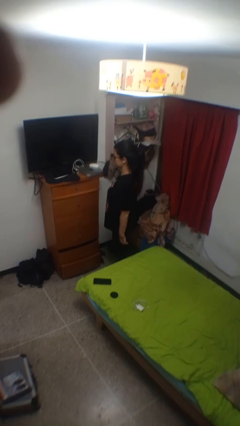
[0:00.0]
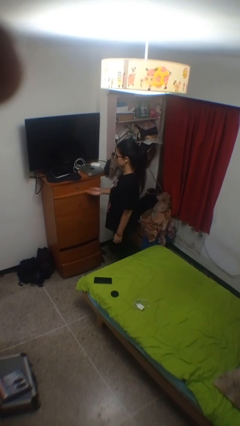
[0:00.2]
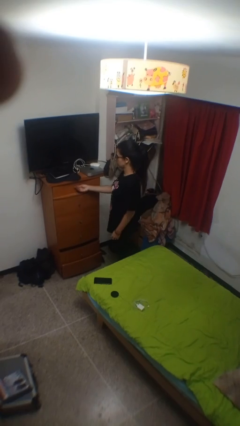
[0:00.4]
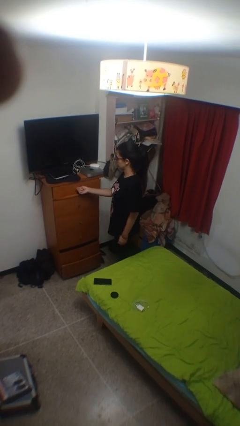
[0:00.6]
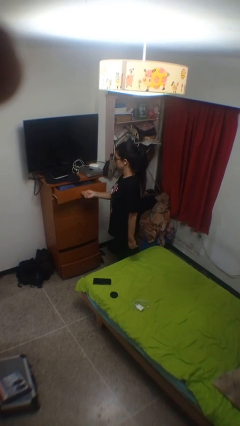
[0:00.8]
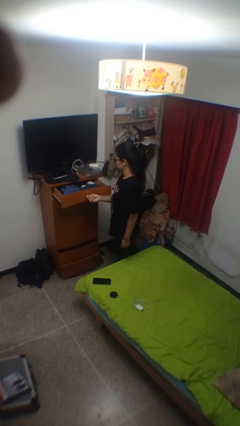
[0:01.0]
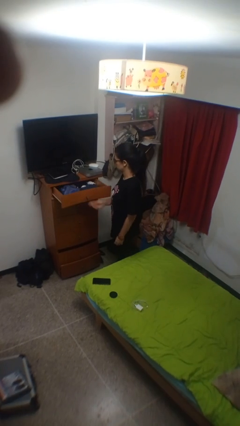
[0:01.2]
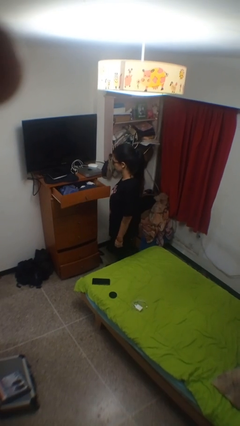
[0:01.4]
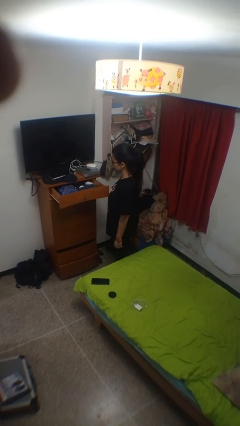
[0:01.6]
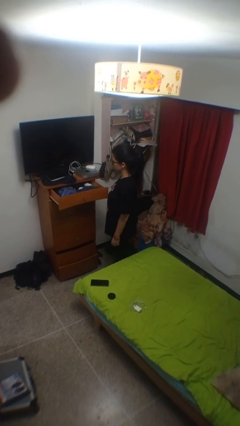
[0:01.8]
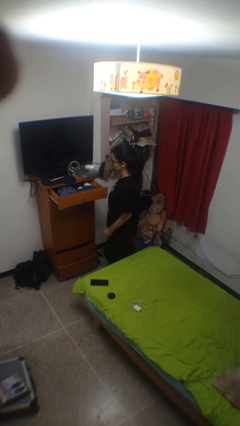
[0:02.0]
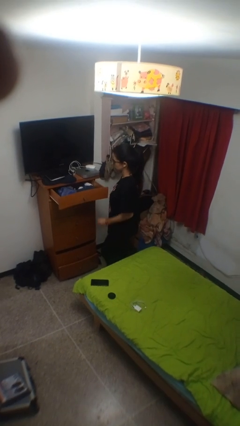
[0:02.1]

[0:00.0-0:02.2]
person opens dresser drawer

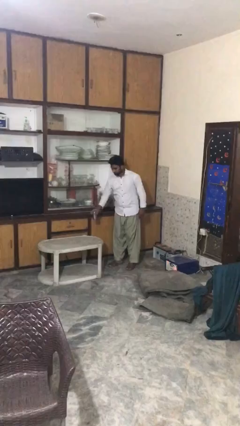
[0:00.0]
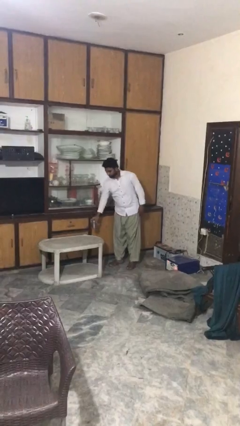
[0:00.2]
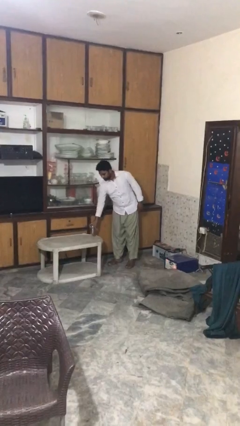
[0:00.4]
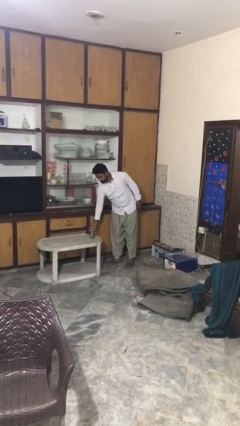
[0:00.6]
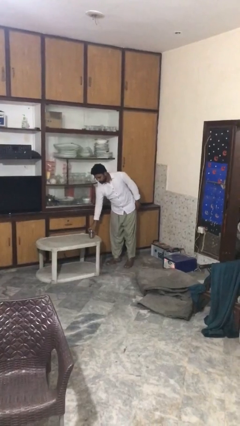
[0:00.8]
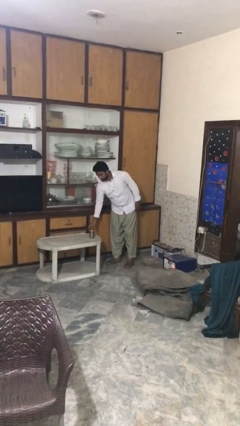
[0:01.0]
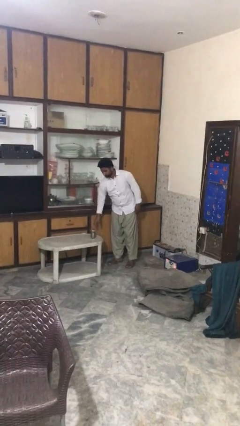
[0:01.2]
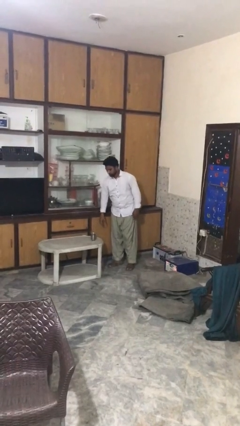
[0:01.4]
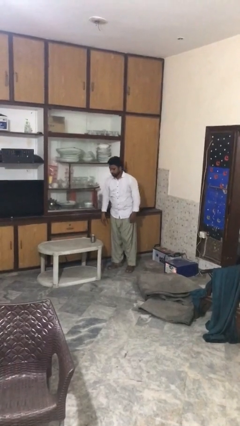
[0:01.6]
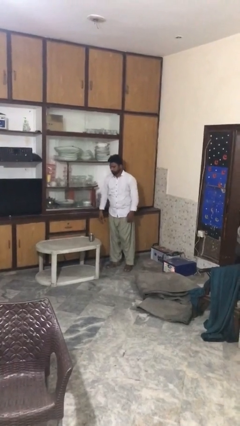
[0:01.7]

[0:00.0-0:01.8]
person puts down object on table

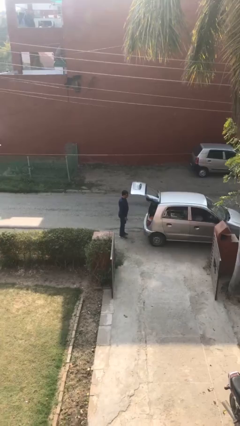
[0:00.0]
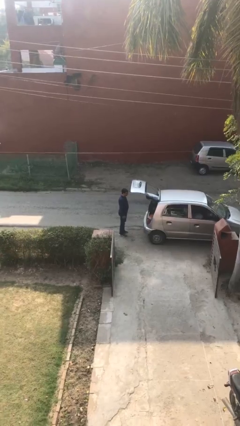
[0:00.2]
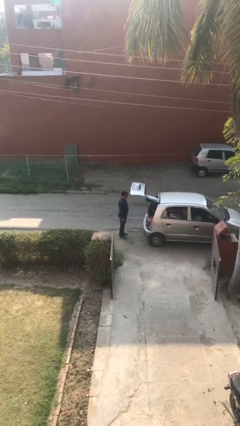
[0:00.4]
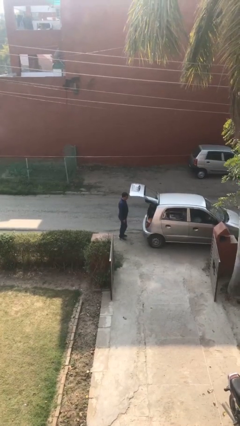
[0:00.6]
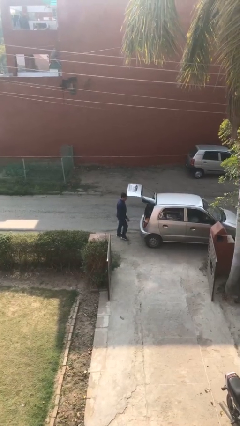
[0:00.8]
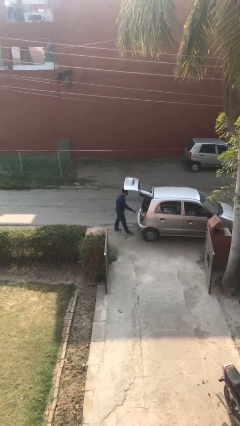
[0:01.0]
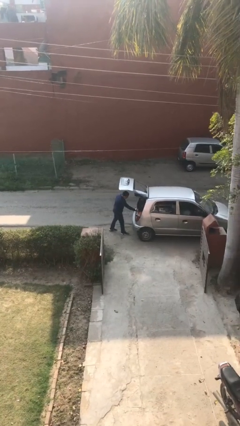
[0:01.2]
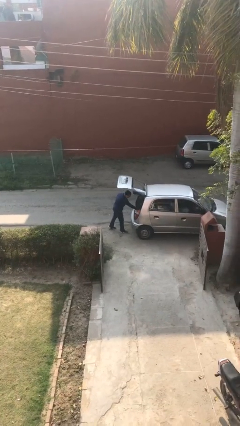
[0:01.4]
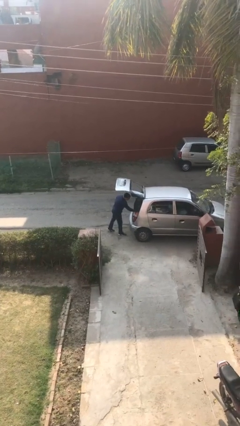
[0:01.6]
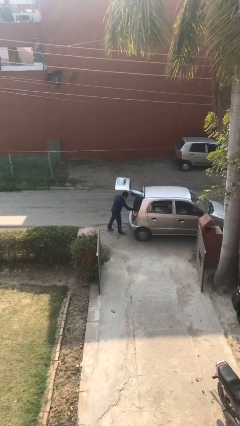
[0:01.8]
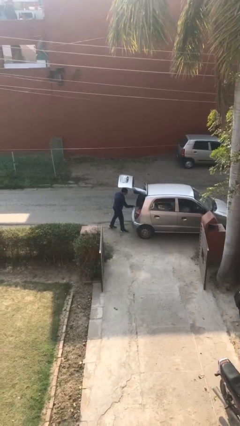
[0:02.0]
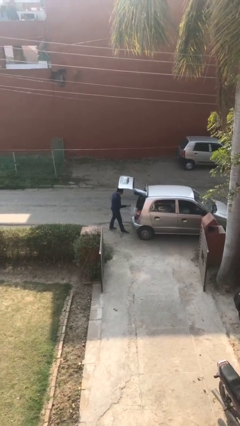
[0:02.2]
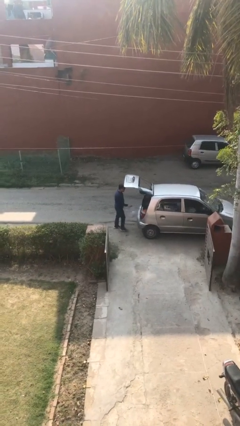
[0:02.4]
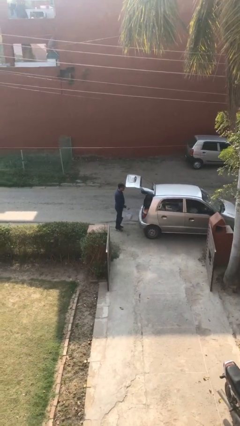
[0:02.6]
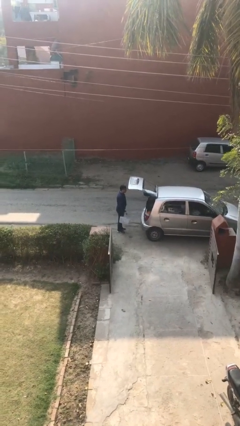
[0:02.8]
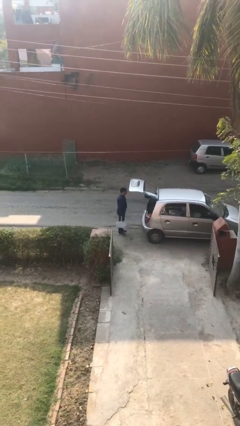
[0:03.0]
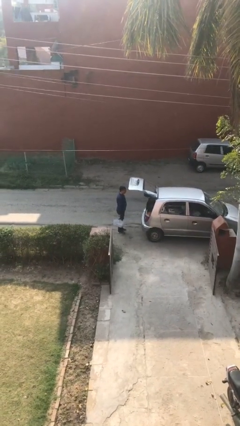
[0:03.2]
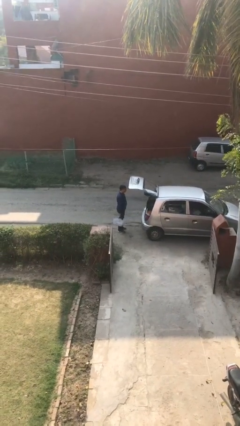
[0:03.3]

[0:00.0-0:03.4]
person unloads car

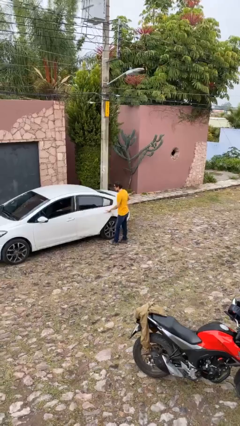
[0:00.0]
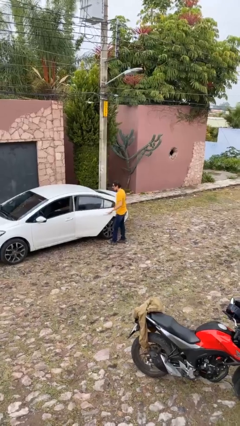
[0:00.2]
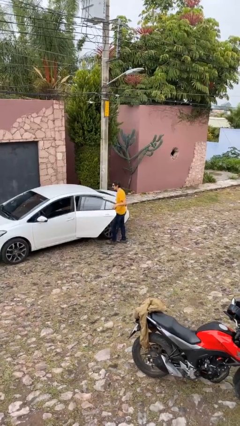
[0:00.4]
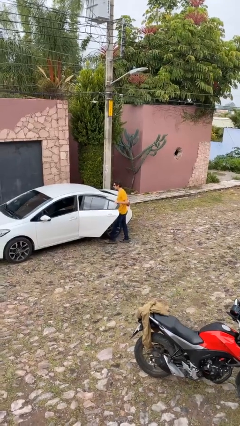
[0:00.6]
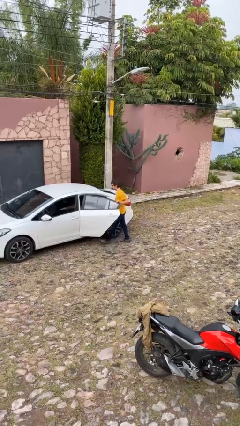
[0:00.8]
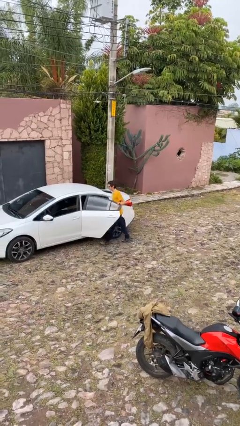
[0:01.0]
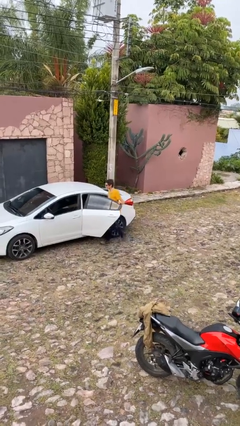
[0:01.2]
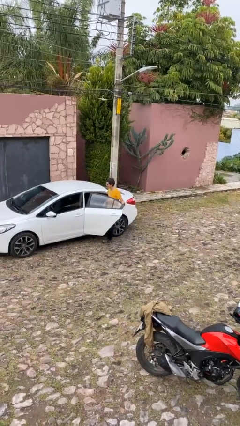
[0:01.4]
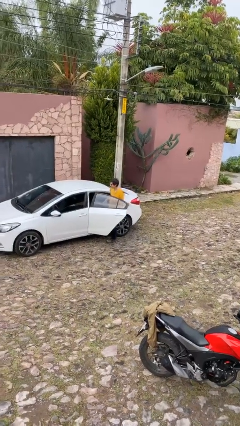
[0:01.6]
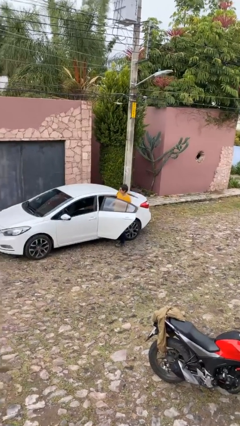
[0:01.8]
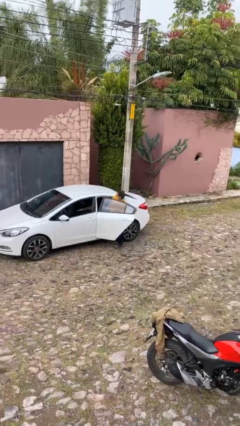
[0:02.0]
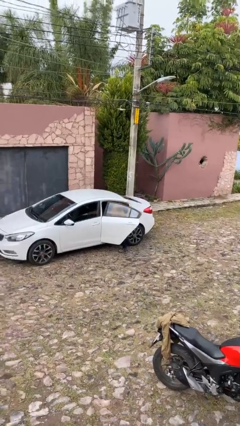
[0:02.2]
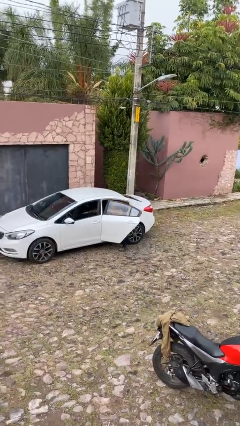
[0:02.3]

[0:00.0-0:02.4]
person opens car door

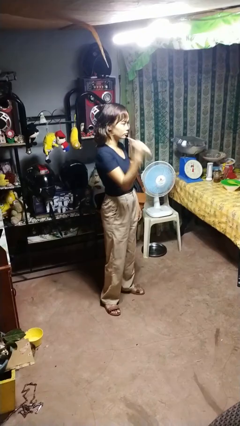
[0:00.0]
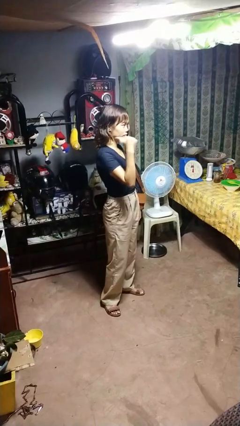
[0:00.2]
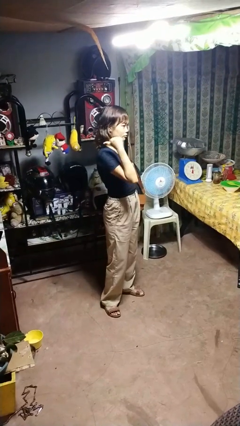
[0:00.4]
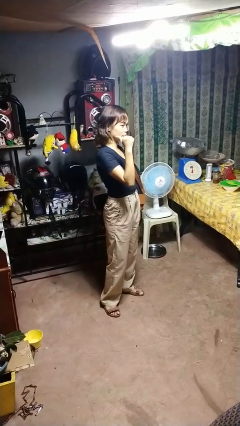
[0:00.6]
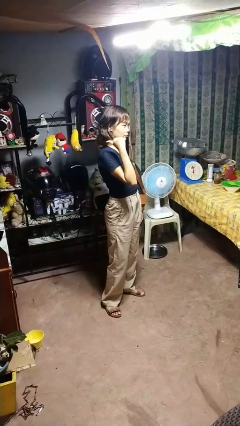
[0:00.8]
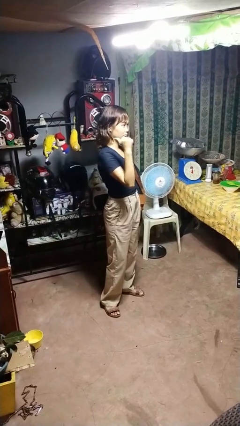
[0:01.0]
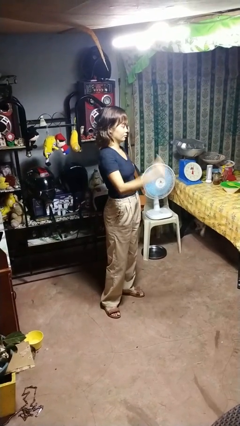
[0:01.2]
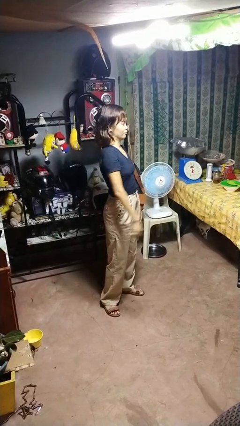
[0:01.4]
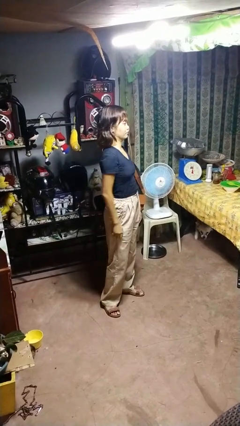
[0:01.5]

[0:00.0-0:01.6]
person gestures behind me

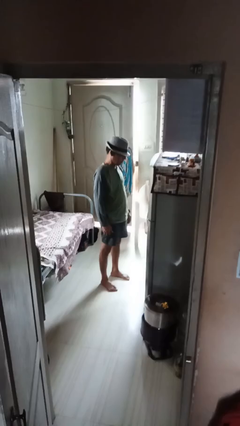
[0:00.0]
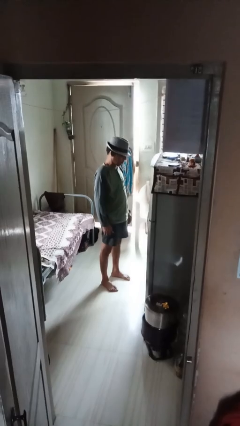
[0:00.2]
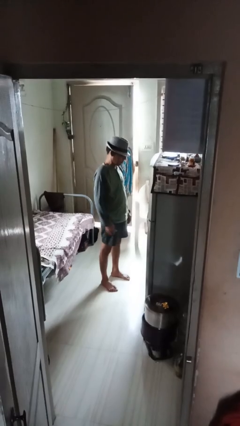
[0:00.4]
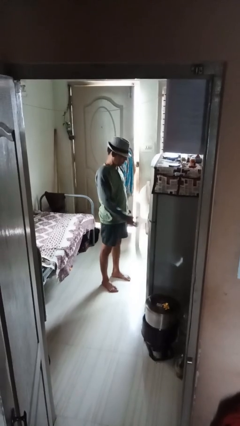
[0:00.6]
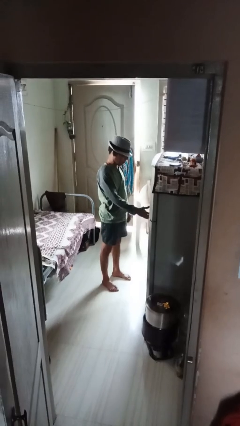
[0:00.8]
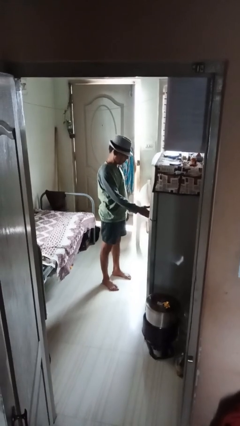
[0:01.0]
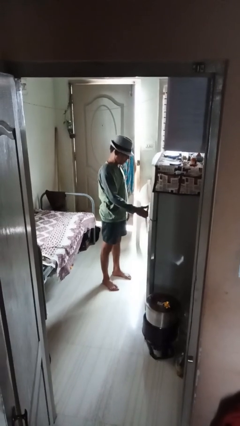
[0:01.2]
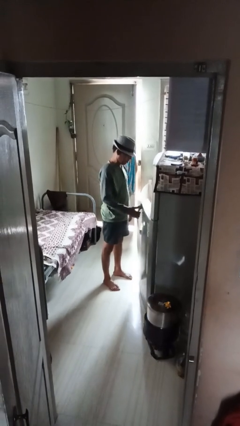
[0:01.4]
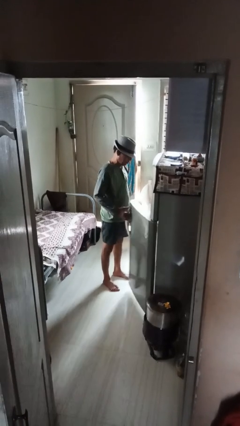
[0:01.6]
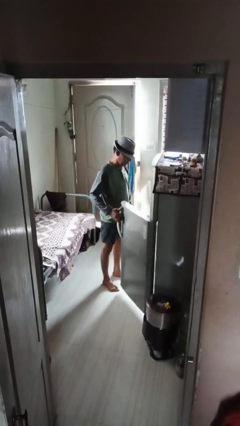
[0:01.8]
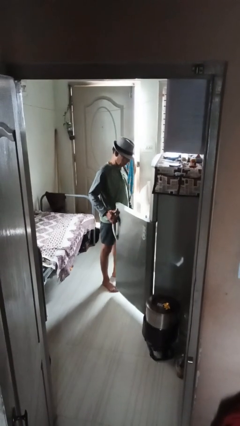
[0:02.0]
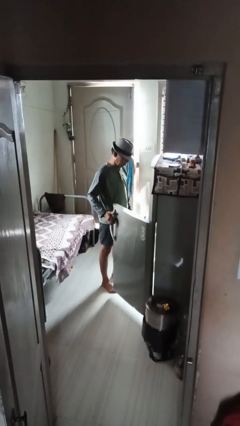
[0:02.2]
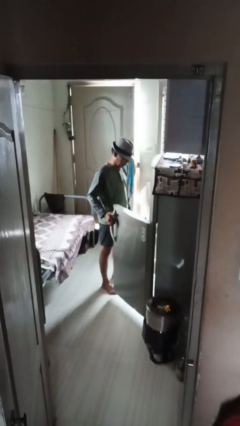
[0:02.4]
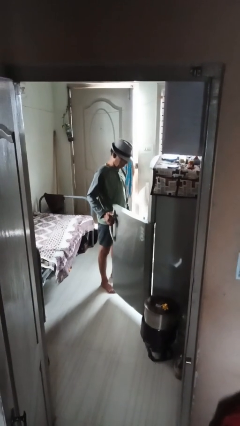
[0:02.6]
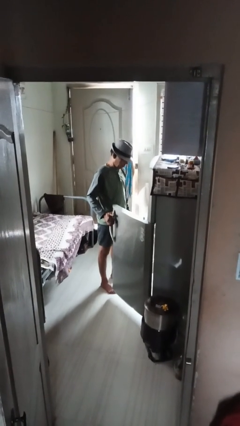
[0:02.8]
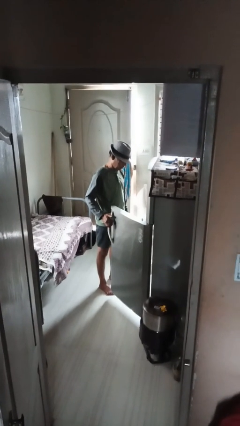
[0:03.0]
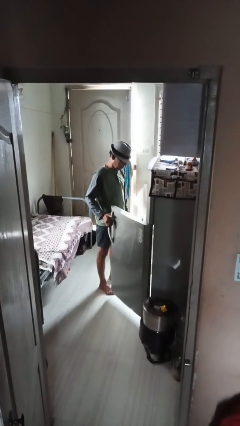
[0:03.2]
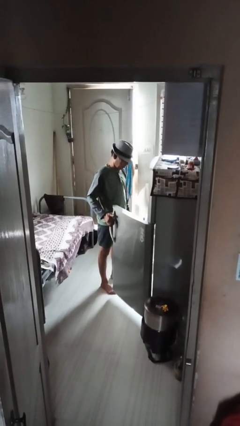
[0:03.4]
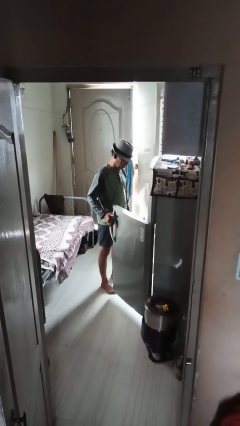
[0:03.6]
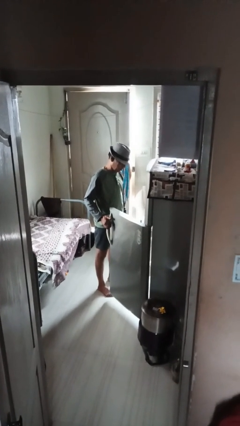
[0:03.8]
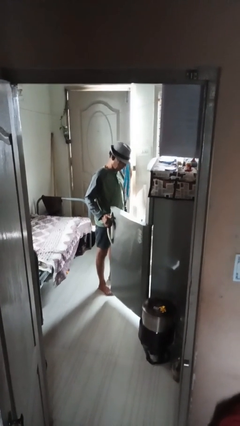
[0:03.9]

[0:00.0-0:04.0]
person opens refrigerator

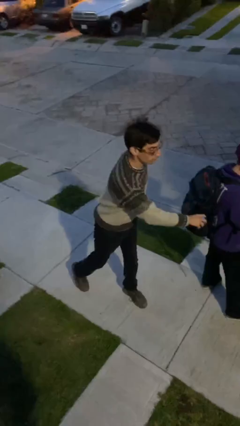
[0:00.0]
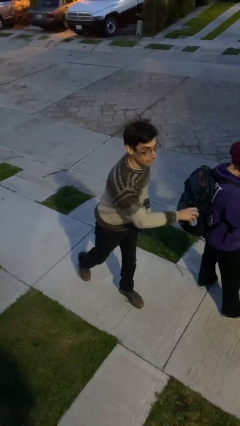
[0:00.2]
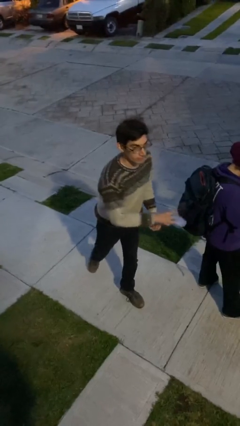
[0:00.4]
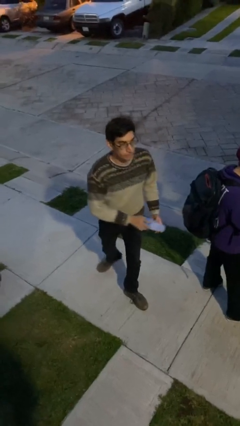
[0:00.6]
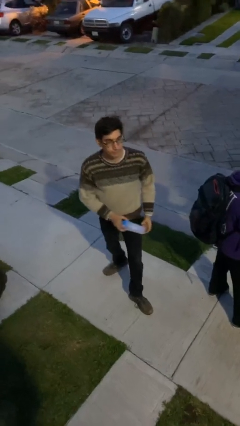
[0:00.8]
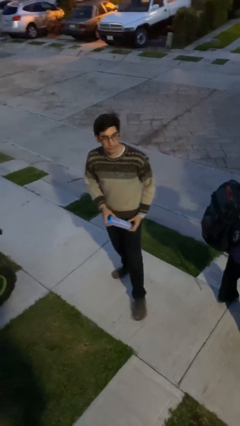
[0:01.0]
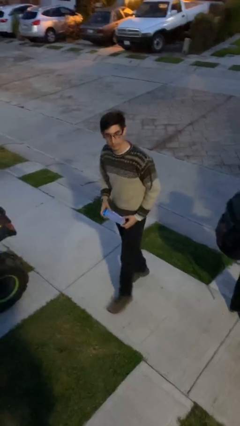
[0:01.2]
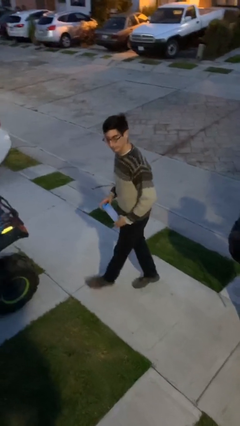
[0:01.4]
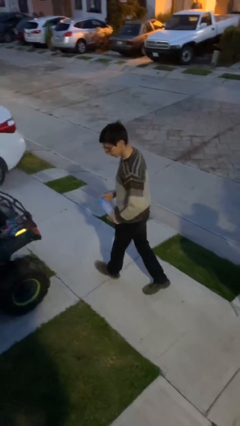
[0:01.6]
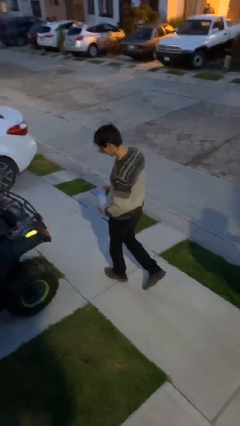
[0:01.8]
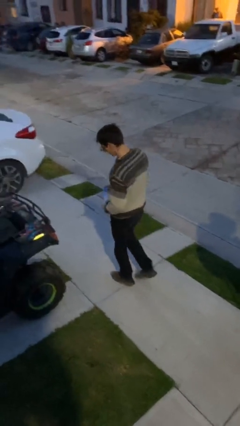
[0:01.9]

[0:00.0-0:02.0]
person steals object from person
